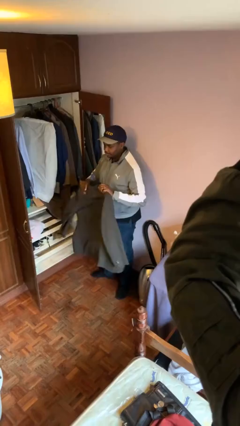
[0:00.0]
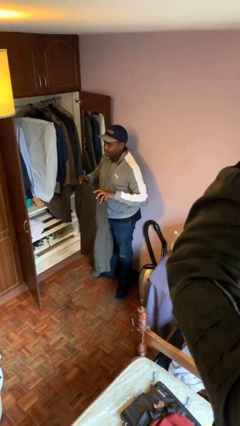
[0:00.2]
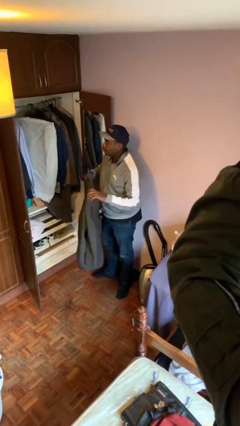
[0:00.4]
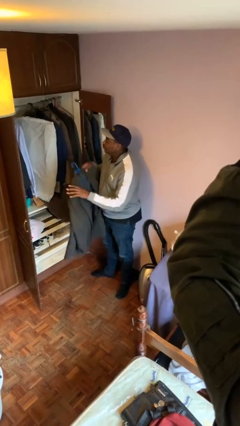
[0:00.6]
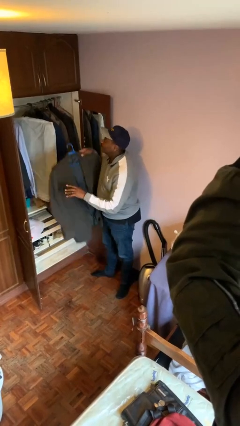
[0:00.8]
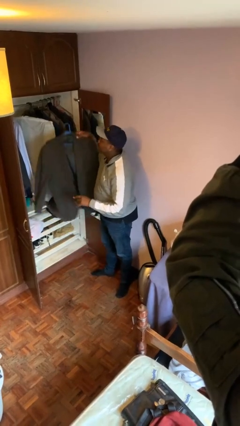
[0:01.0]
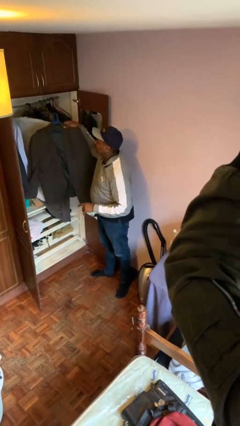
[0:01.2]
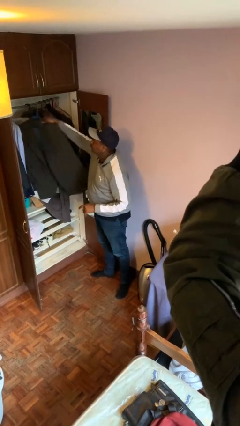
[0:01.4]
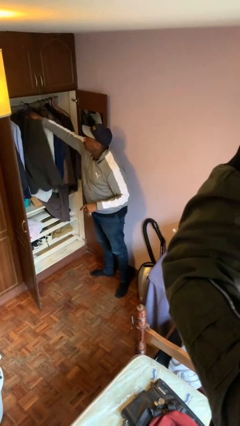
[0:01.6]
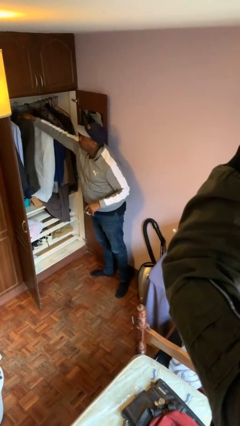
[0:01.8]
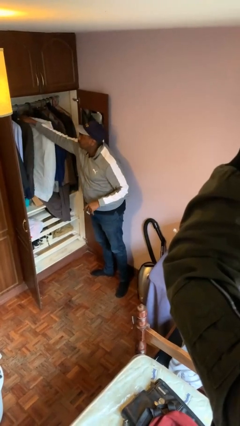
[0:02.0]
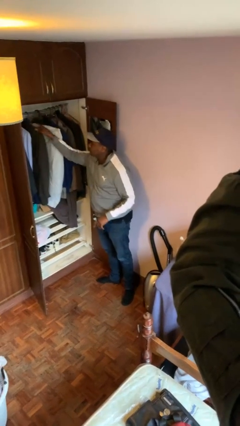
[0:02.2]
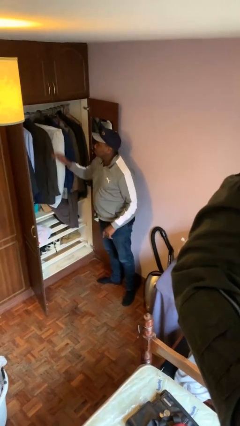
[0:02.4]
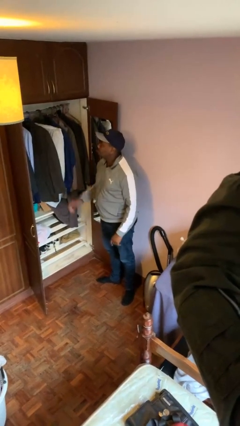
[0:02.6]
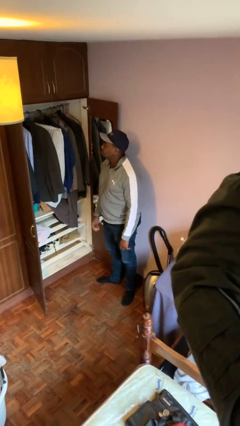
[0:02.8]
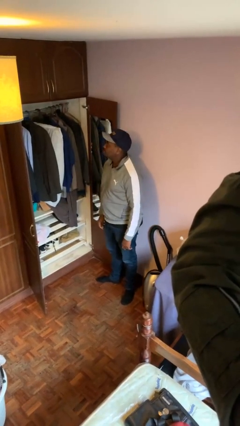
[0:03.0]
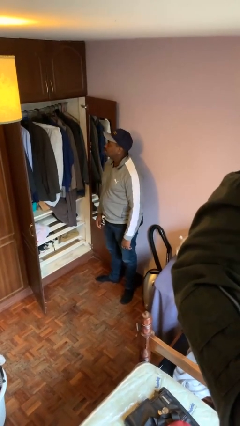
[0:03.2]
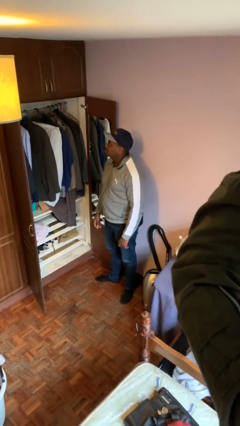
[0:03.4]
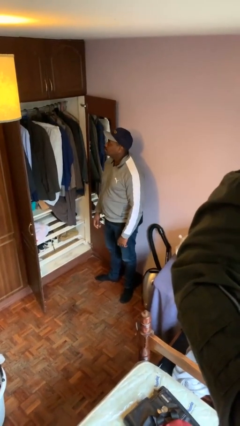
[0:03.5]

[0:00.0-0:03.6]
person puts clothes into closet

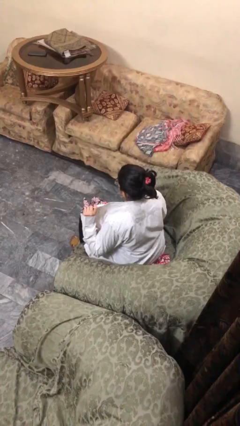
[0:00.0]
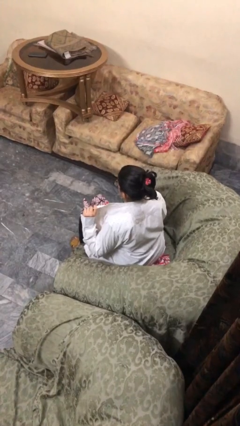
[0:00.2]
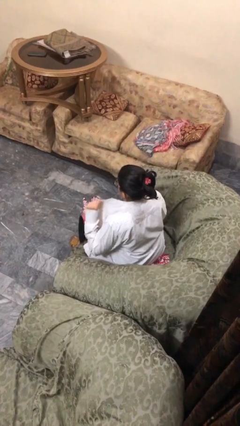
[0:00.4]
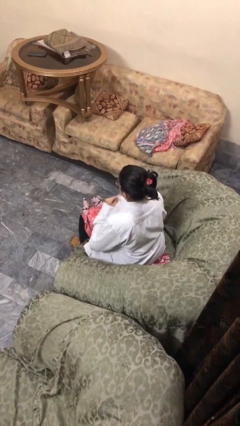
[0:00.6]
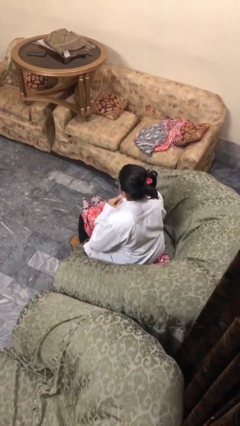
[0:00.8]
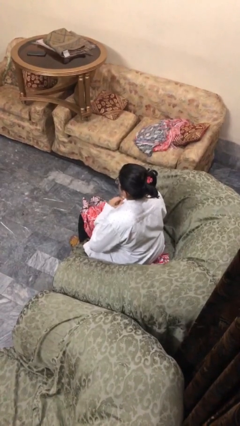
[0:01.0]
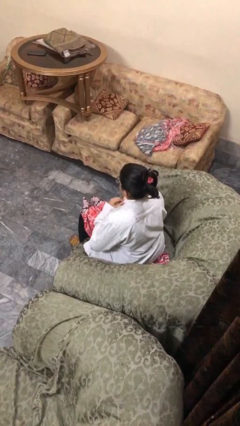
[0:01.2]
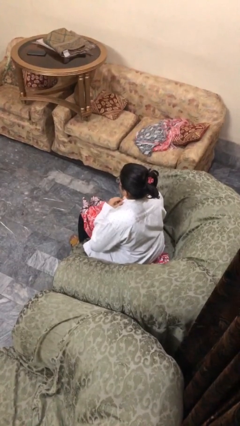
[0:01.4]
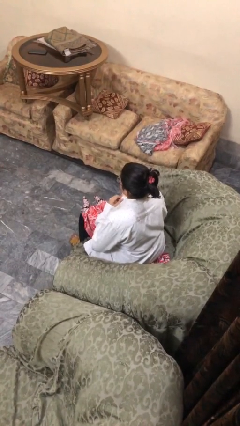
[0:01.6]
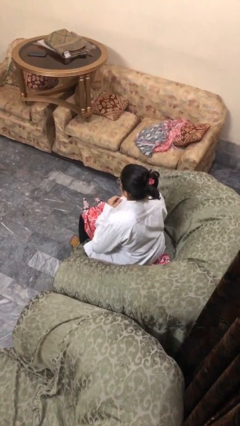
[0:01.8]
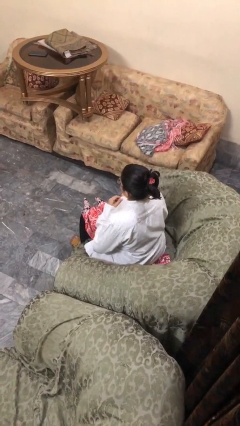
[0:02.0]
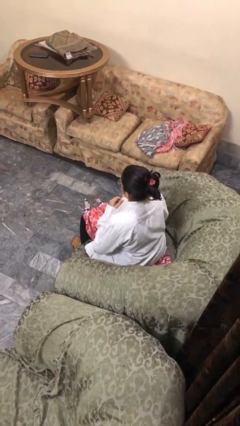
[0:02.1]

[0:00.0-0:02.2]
person buttons shirt

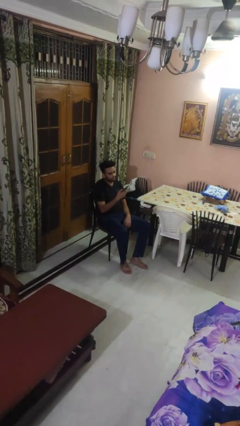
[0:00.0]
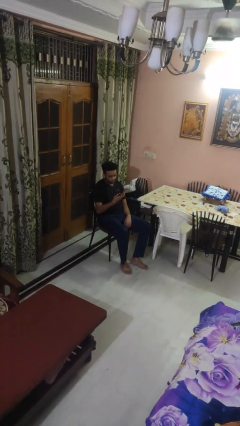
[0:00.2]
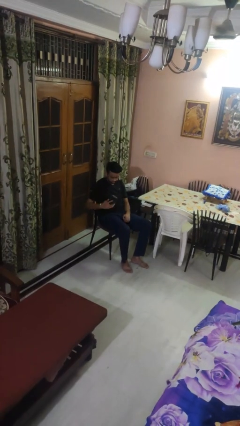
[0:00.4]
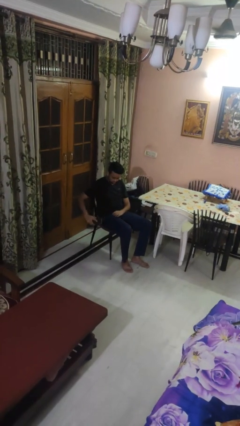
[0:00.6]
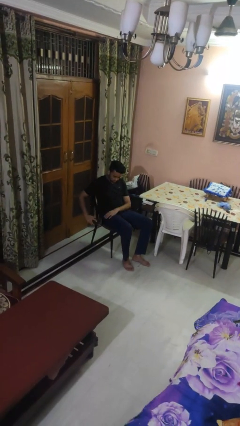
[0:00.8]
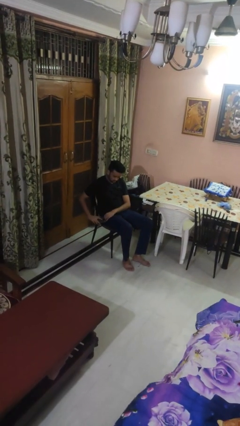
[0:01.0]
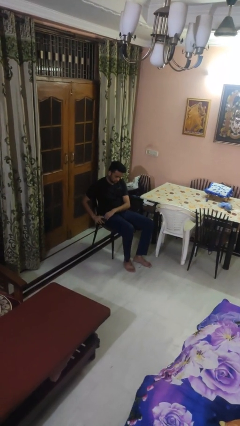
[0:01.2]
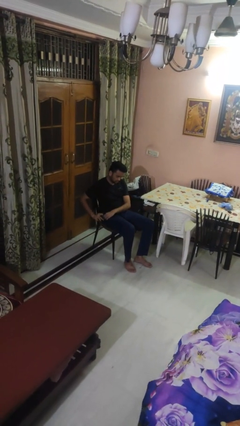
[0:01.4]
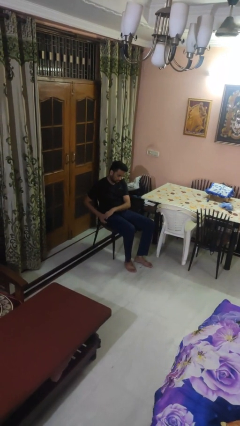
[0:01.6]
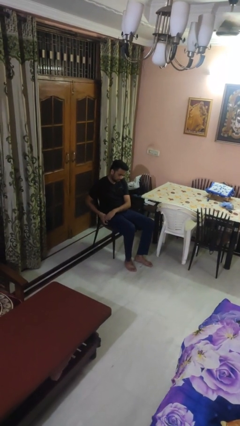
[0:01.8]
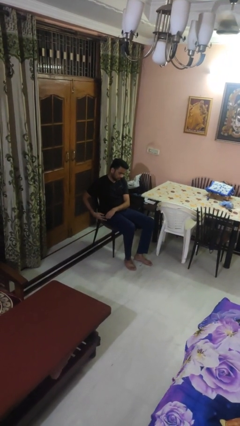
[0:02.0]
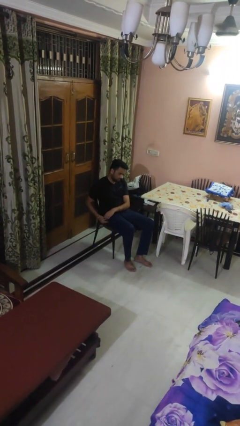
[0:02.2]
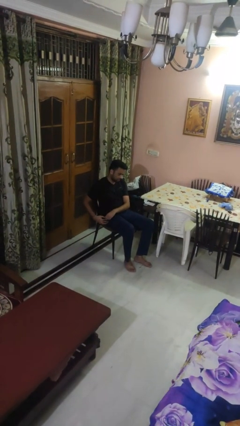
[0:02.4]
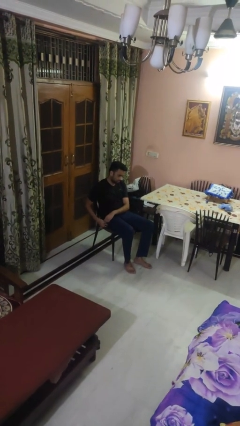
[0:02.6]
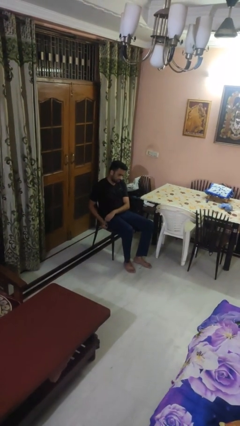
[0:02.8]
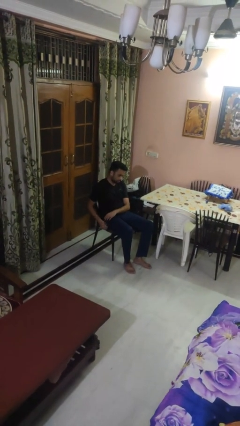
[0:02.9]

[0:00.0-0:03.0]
person puts phone into pocket

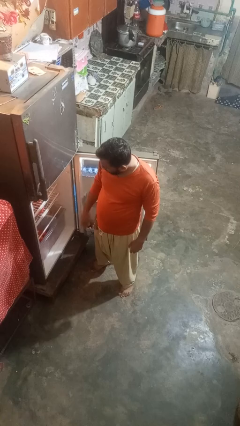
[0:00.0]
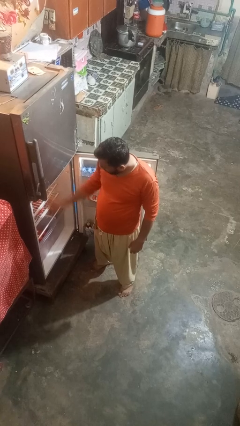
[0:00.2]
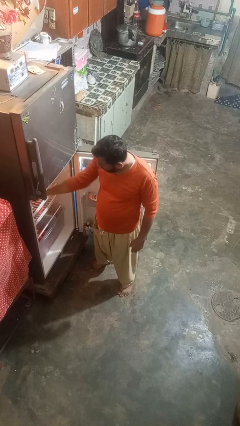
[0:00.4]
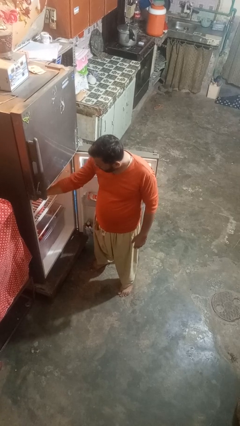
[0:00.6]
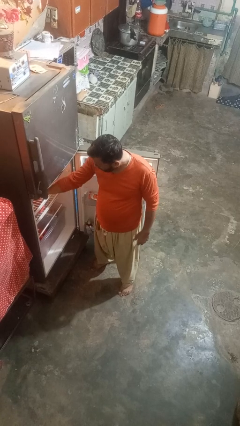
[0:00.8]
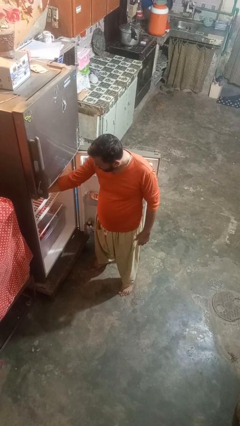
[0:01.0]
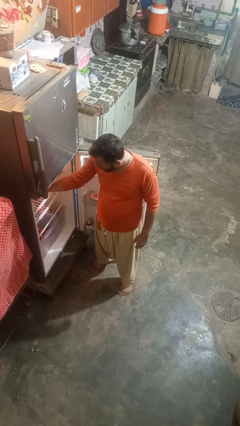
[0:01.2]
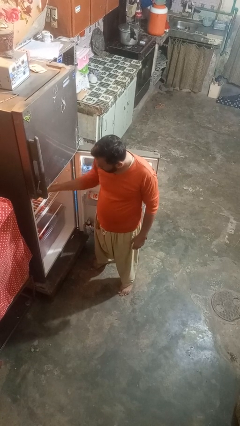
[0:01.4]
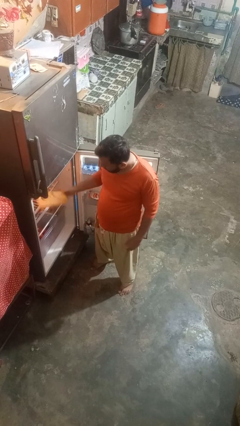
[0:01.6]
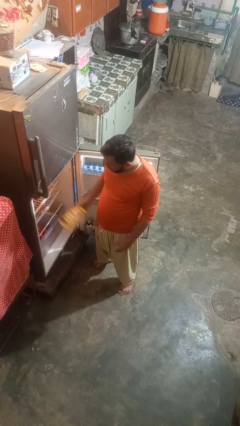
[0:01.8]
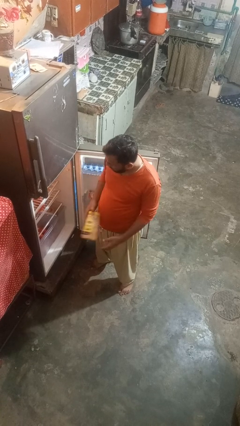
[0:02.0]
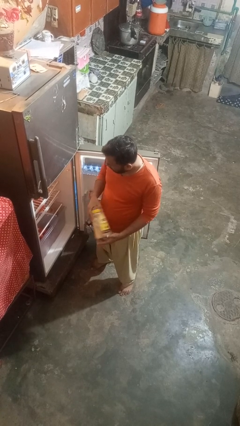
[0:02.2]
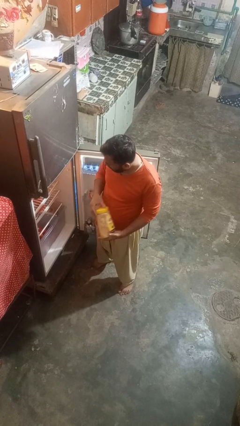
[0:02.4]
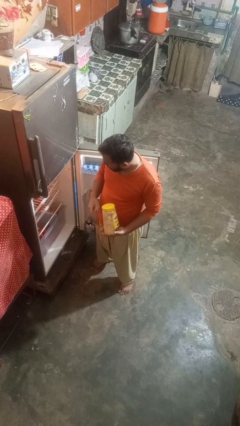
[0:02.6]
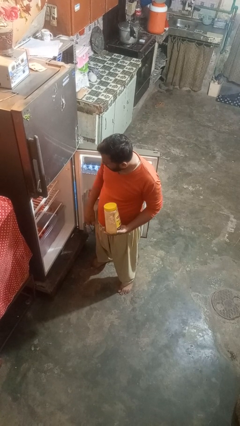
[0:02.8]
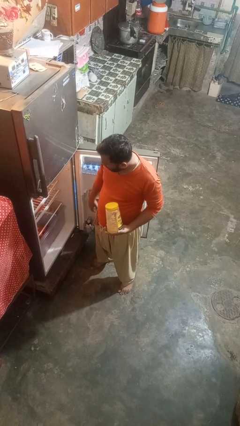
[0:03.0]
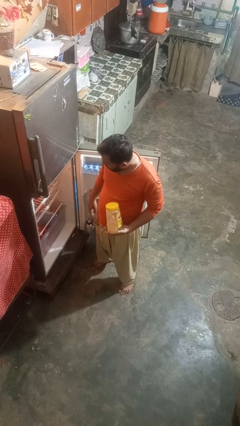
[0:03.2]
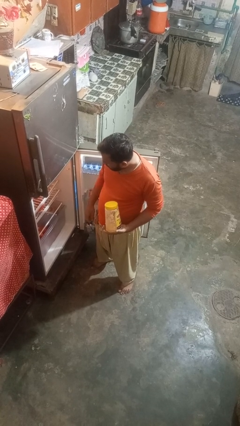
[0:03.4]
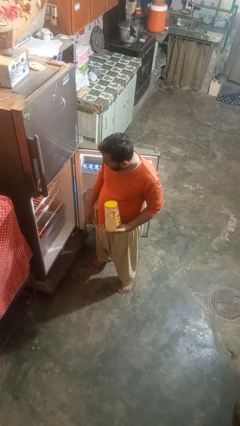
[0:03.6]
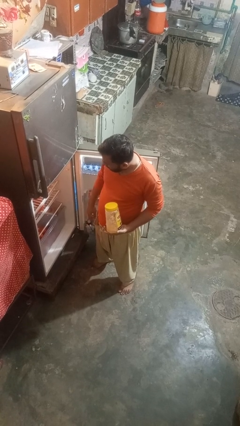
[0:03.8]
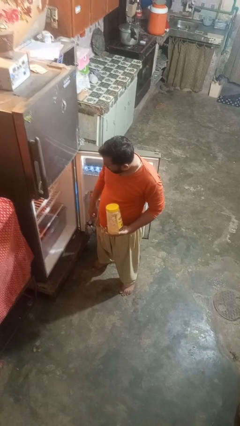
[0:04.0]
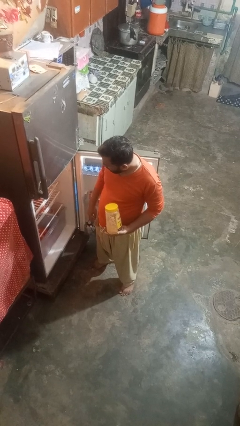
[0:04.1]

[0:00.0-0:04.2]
person takes object from refrigerator

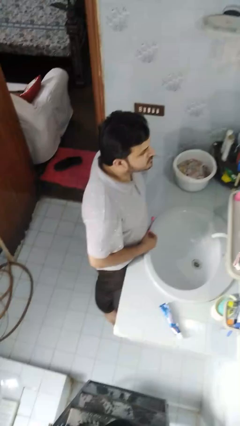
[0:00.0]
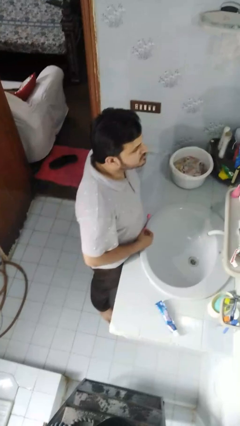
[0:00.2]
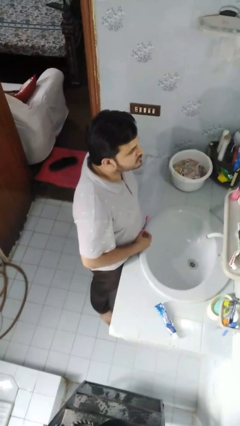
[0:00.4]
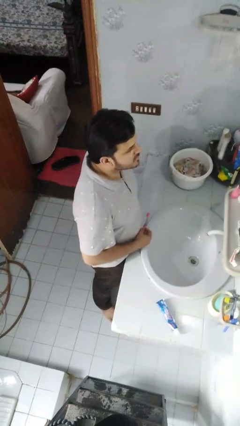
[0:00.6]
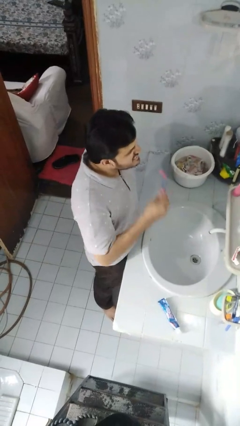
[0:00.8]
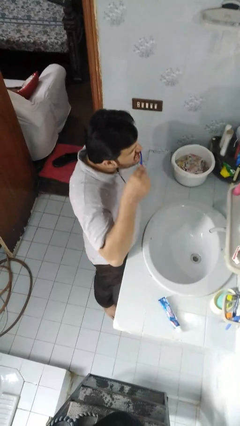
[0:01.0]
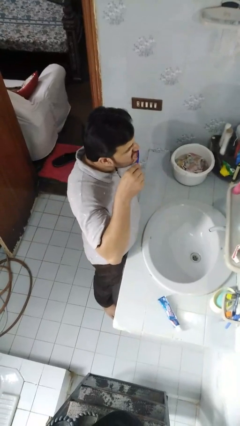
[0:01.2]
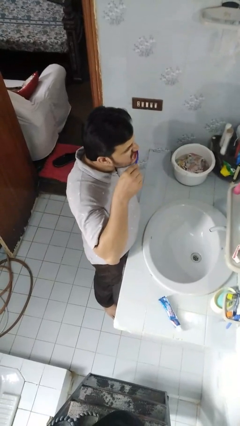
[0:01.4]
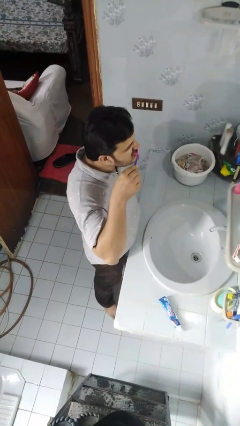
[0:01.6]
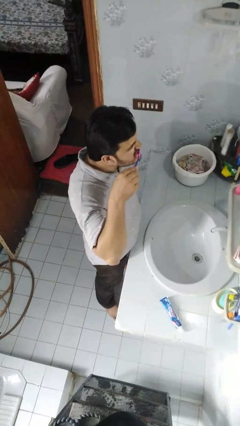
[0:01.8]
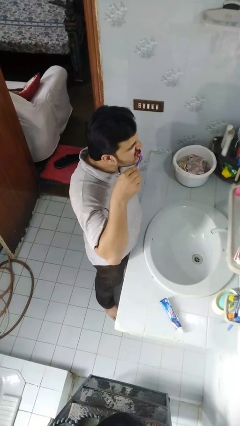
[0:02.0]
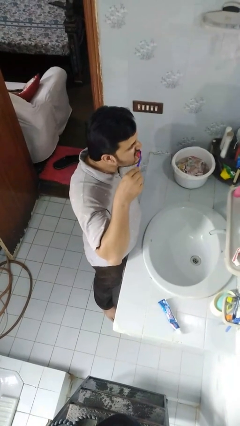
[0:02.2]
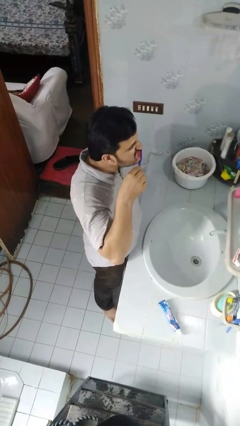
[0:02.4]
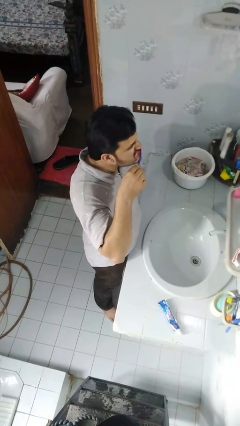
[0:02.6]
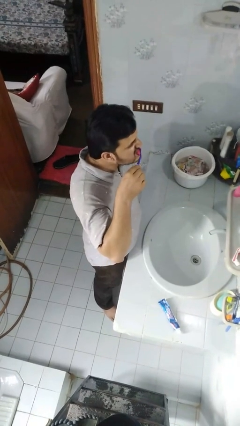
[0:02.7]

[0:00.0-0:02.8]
person brushes teeth

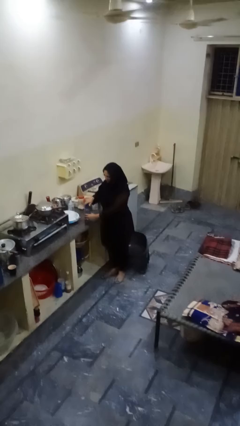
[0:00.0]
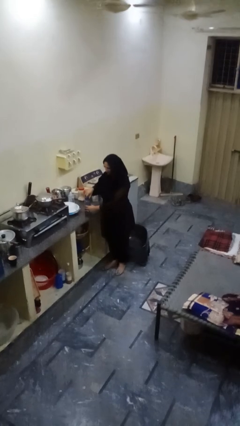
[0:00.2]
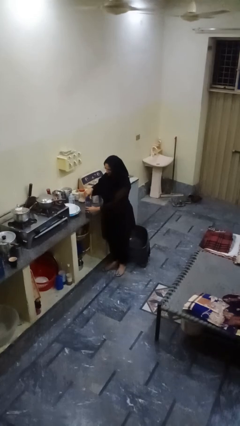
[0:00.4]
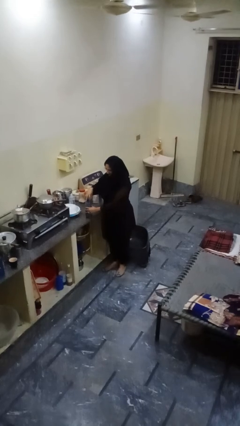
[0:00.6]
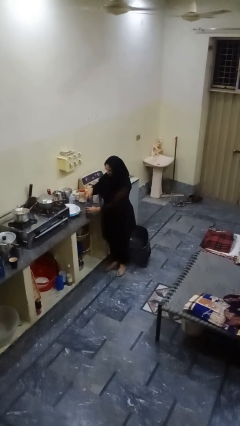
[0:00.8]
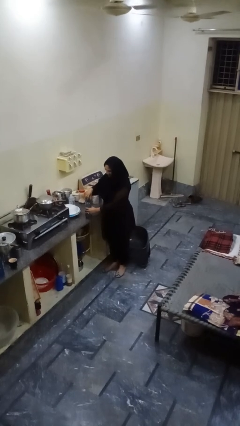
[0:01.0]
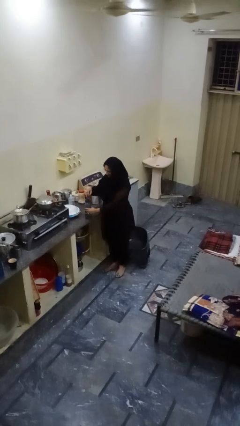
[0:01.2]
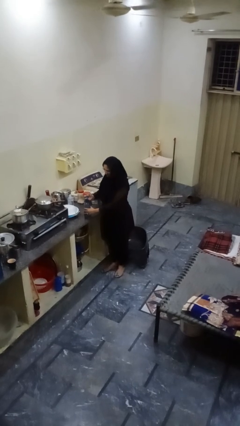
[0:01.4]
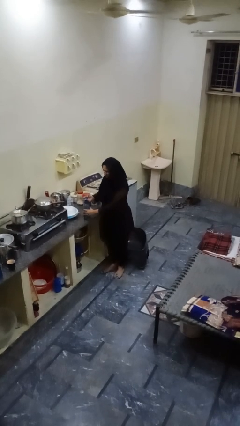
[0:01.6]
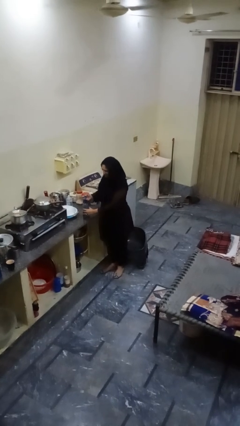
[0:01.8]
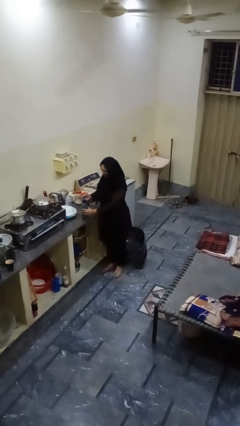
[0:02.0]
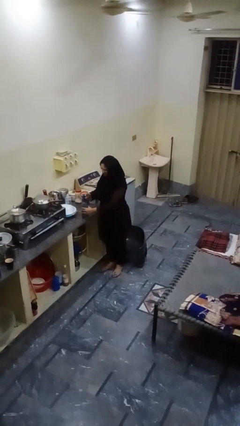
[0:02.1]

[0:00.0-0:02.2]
person unscrews lid from bottle
